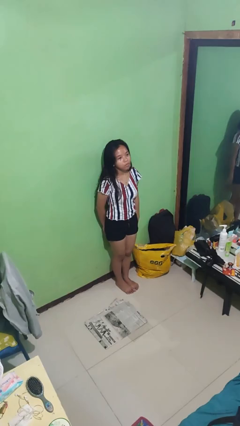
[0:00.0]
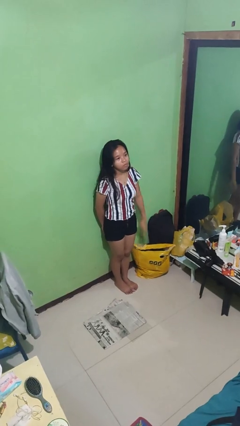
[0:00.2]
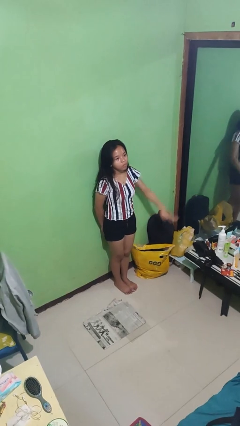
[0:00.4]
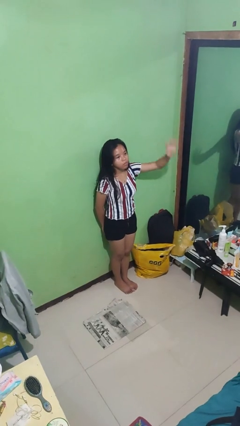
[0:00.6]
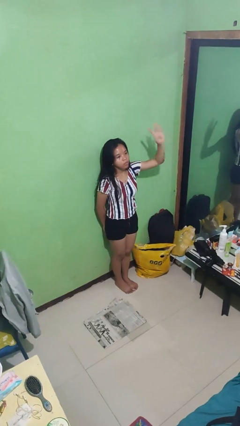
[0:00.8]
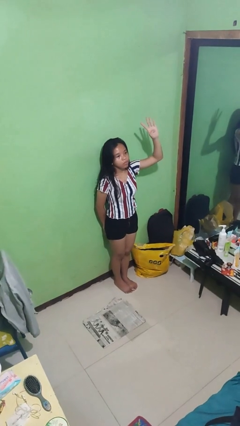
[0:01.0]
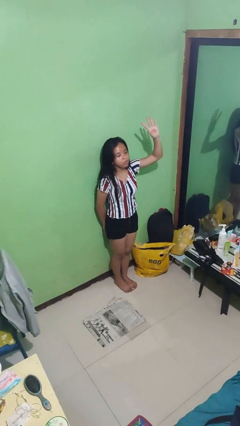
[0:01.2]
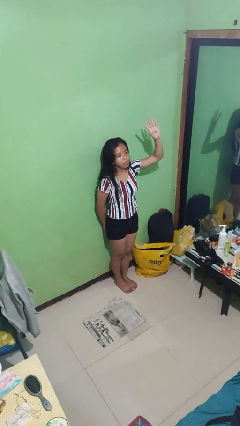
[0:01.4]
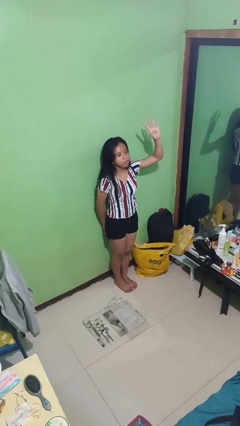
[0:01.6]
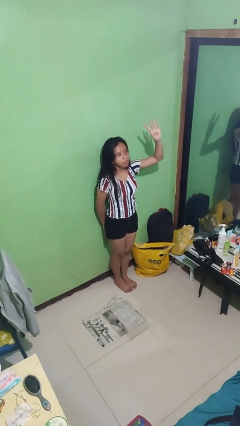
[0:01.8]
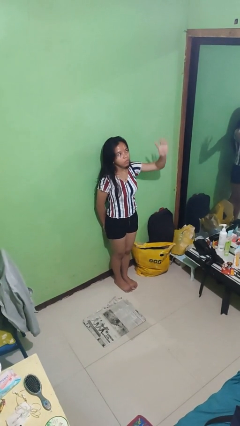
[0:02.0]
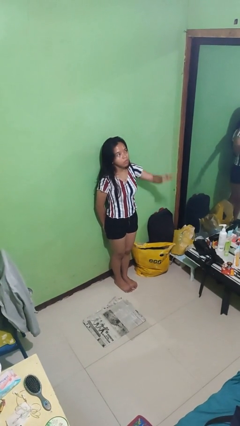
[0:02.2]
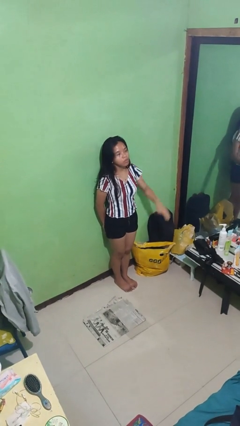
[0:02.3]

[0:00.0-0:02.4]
person gestures number four

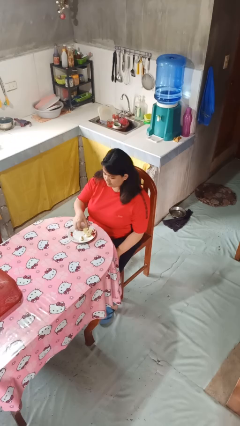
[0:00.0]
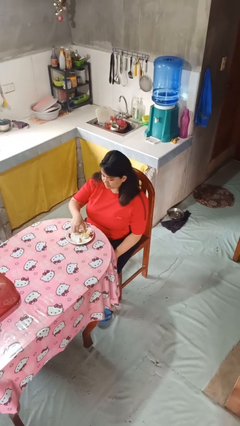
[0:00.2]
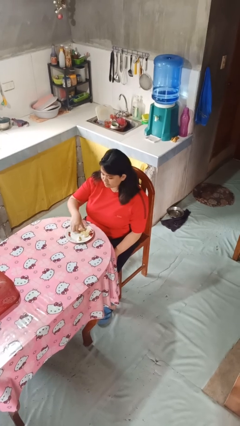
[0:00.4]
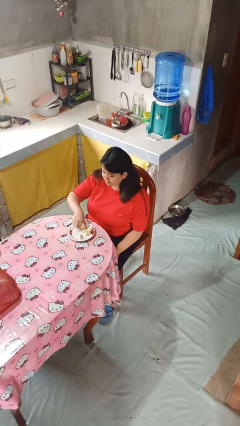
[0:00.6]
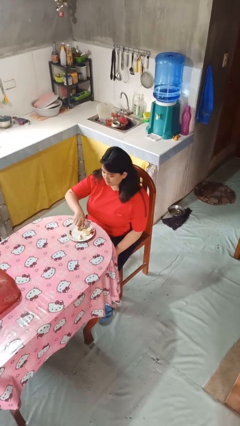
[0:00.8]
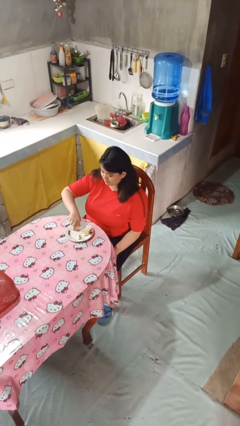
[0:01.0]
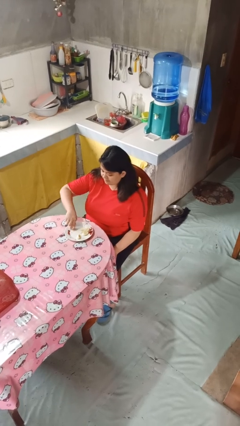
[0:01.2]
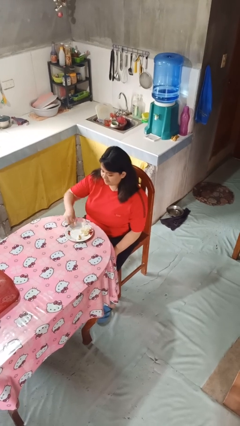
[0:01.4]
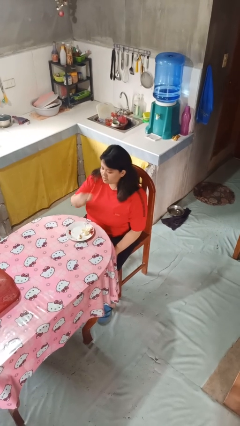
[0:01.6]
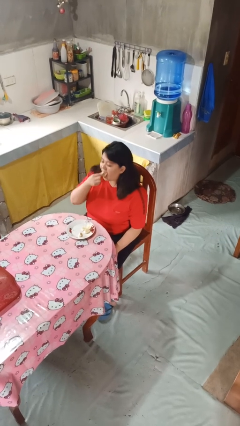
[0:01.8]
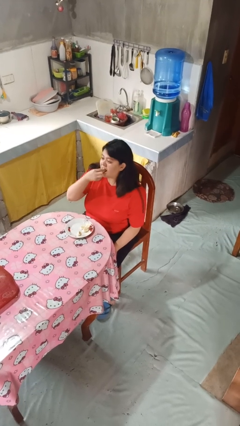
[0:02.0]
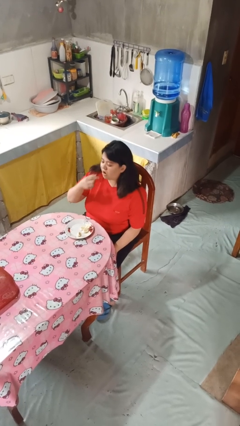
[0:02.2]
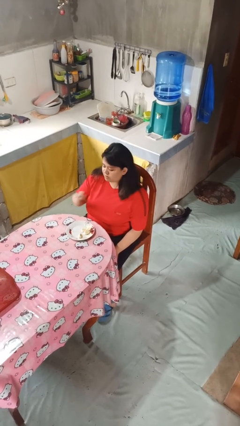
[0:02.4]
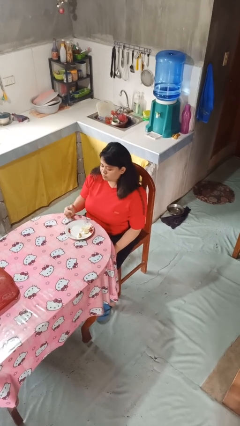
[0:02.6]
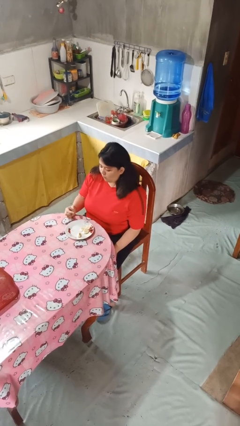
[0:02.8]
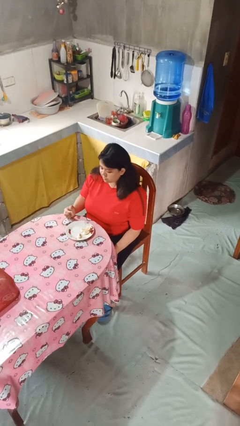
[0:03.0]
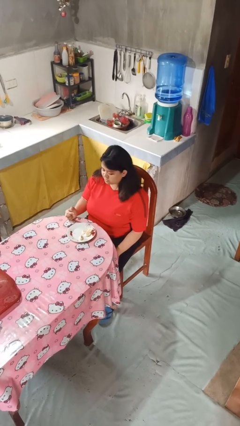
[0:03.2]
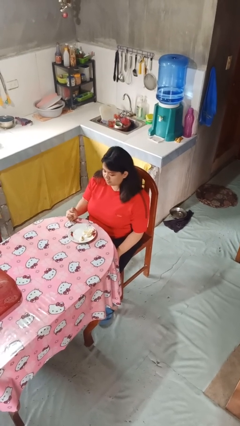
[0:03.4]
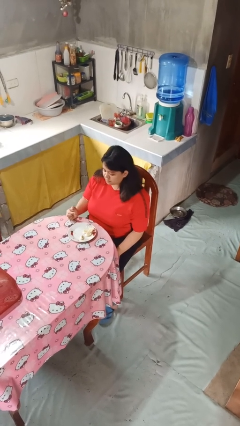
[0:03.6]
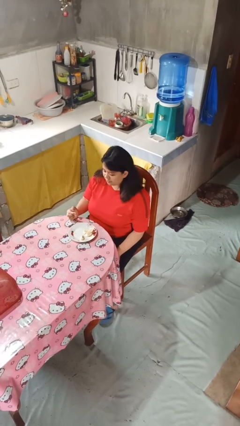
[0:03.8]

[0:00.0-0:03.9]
person eats with hands

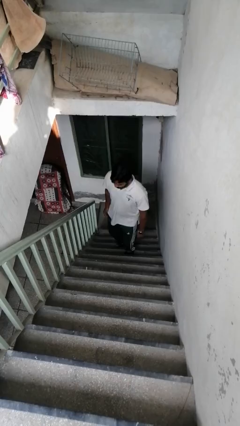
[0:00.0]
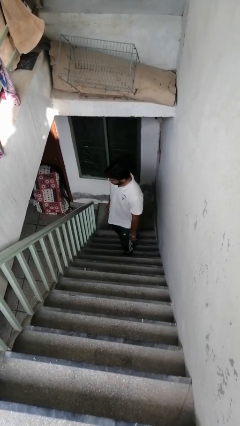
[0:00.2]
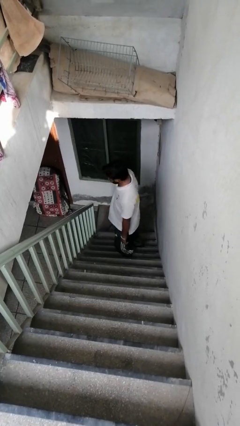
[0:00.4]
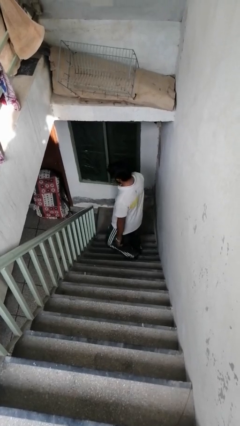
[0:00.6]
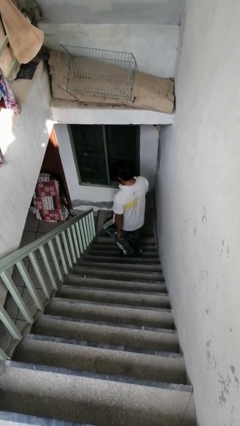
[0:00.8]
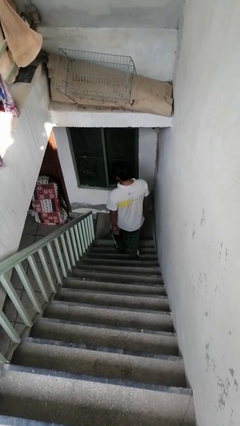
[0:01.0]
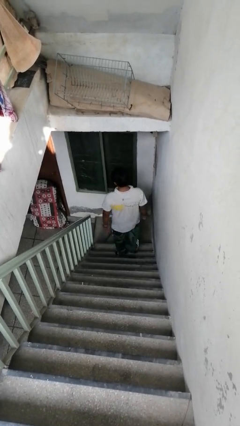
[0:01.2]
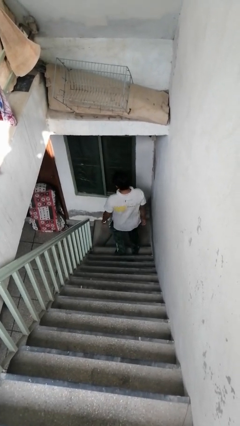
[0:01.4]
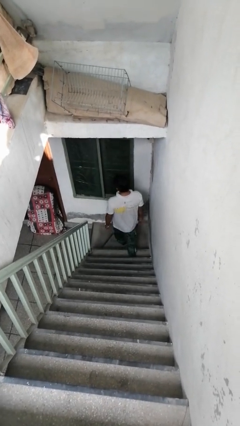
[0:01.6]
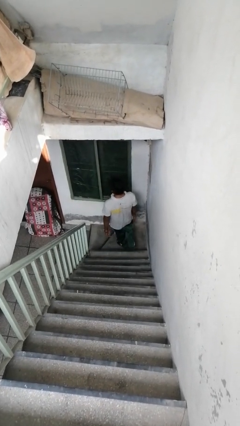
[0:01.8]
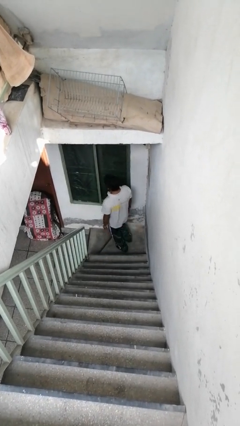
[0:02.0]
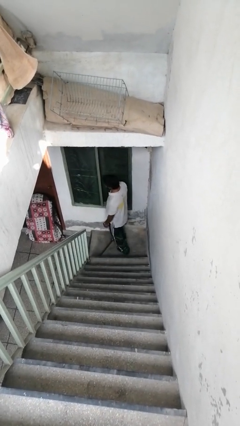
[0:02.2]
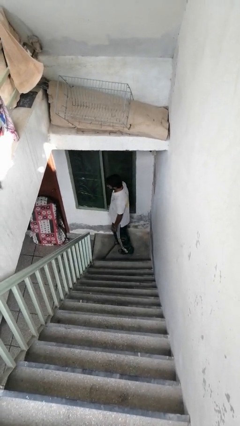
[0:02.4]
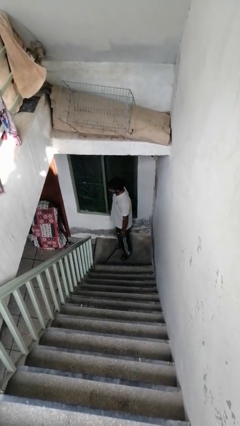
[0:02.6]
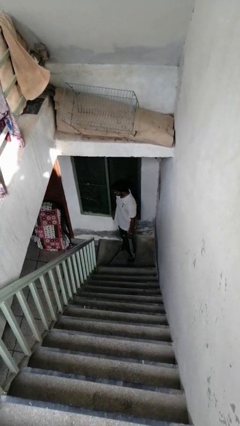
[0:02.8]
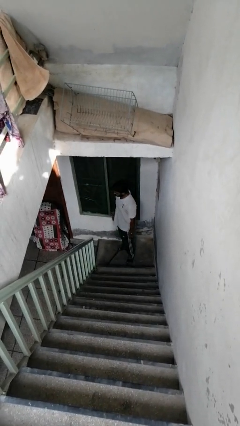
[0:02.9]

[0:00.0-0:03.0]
person climbs down stairs

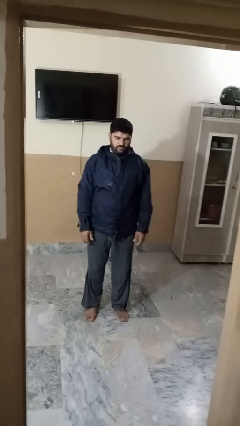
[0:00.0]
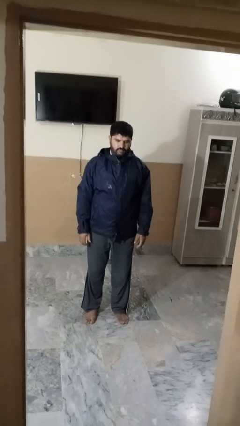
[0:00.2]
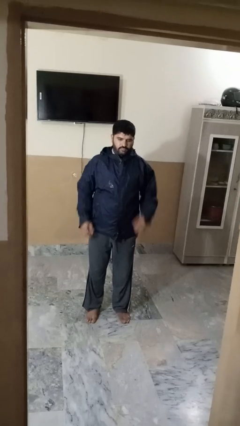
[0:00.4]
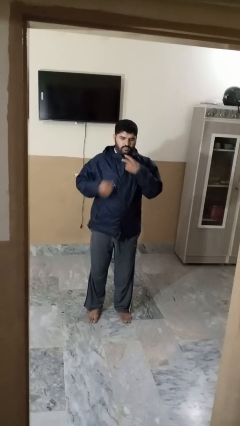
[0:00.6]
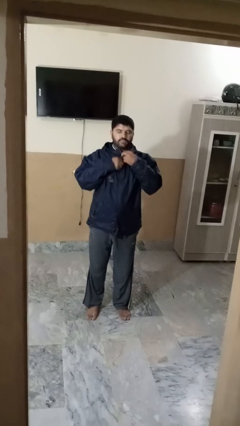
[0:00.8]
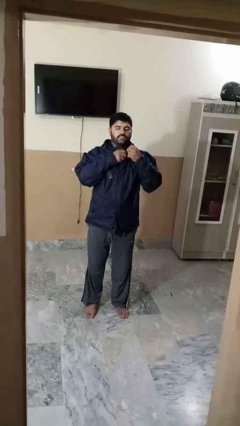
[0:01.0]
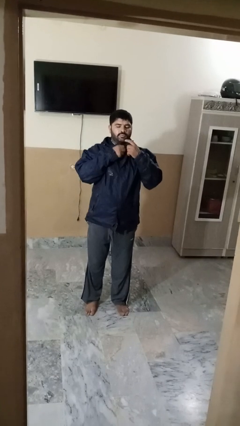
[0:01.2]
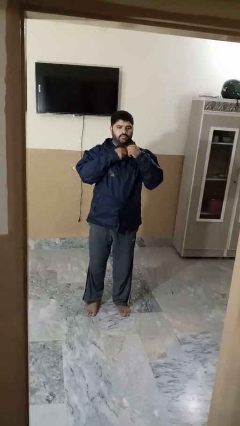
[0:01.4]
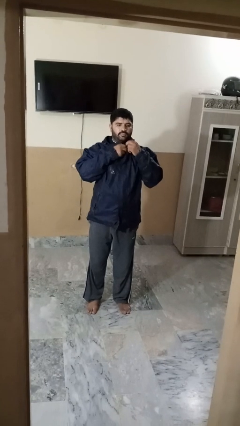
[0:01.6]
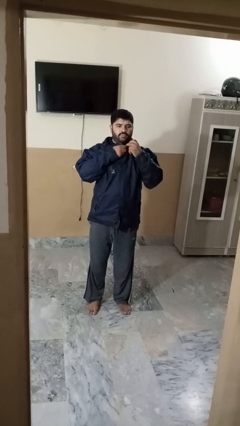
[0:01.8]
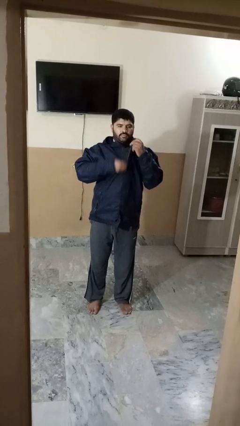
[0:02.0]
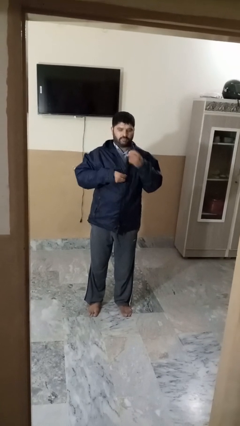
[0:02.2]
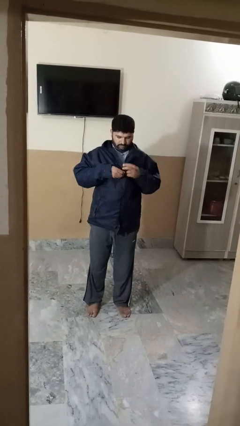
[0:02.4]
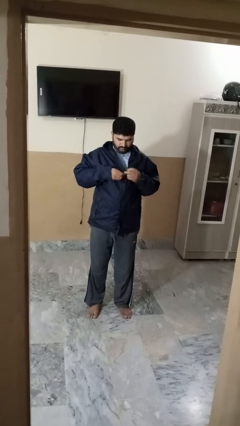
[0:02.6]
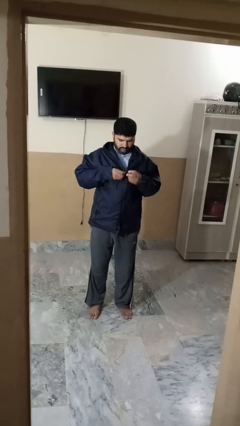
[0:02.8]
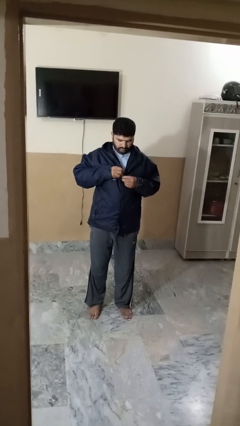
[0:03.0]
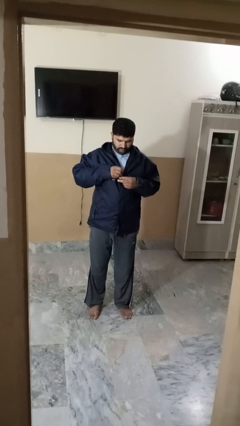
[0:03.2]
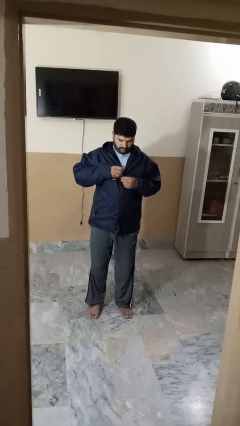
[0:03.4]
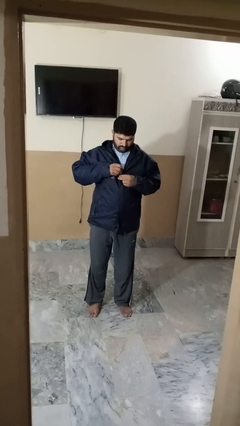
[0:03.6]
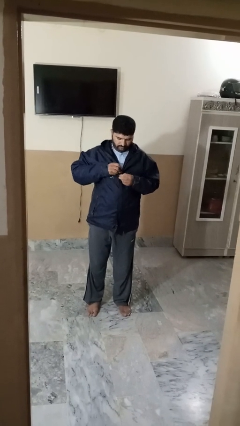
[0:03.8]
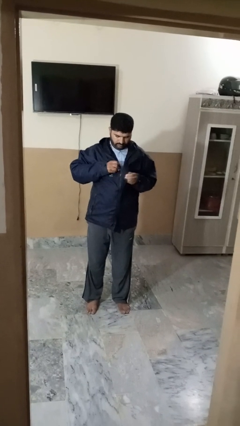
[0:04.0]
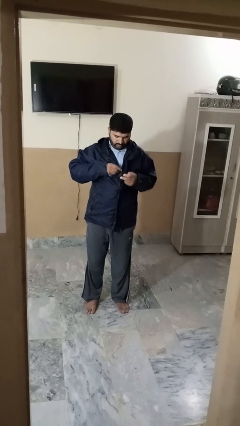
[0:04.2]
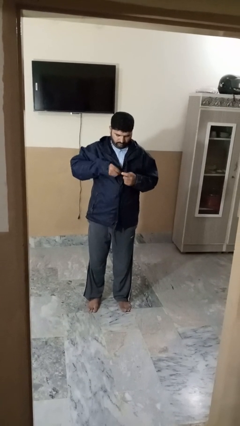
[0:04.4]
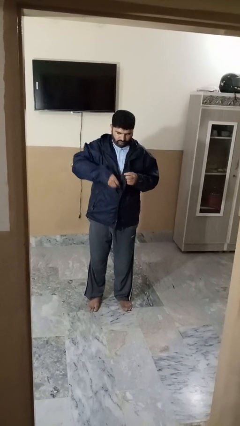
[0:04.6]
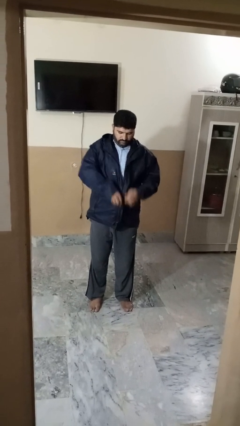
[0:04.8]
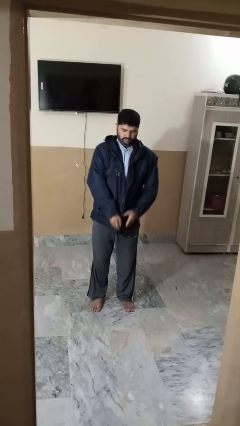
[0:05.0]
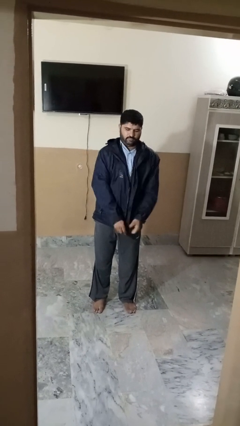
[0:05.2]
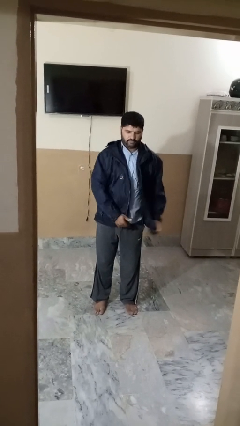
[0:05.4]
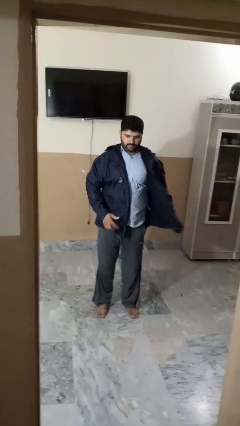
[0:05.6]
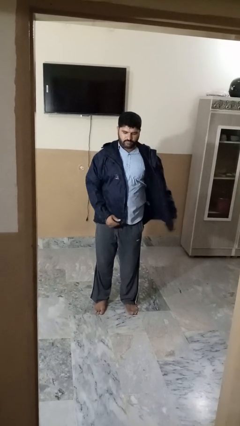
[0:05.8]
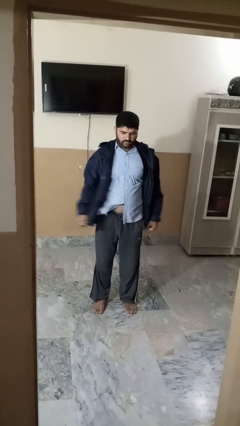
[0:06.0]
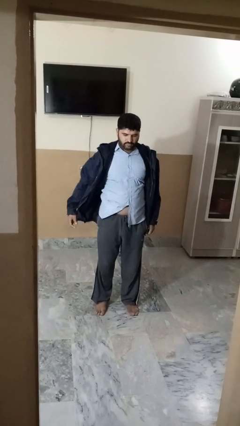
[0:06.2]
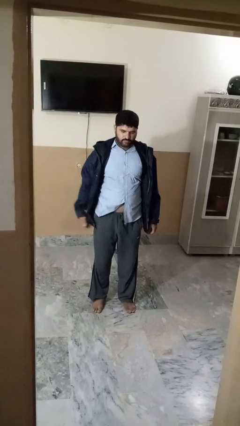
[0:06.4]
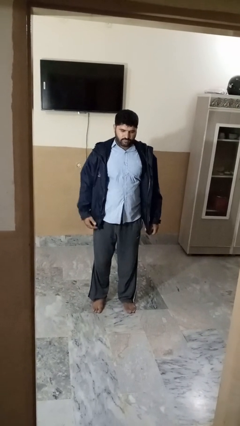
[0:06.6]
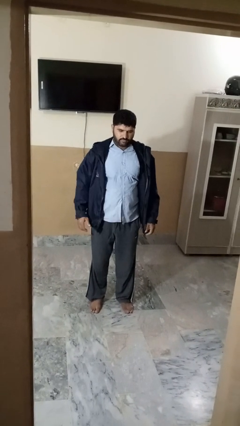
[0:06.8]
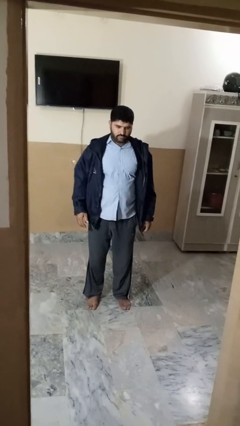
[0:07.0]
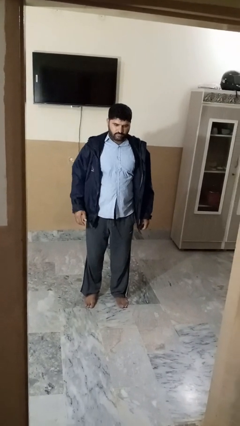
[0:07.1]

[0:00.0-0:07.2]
person unzips jacket

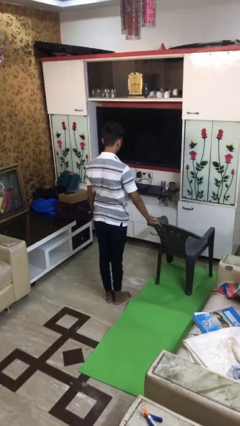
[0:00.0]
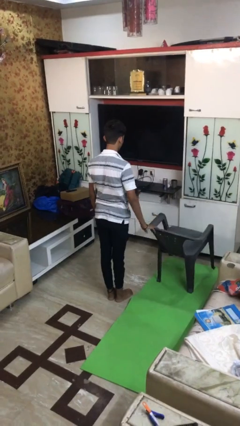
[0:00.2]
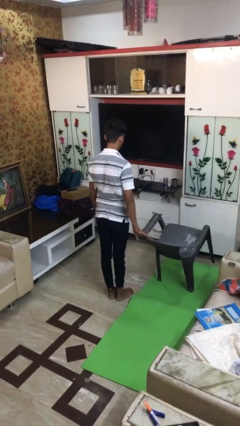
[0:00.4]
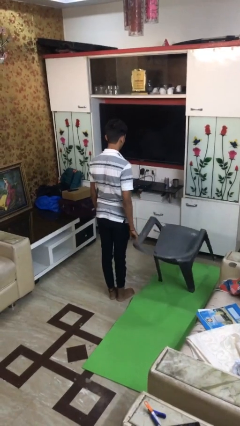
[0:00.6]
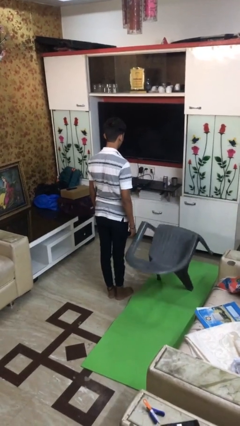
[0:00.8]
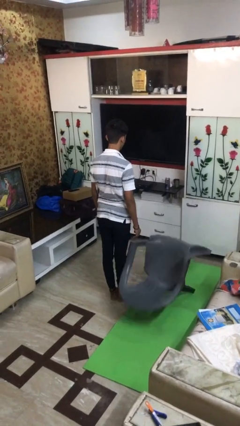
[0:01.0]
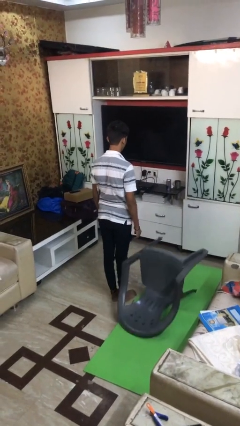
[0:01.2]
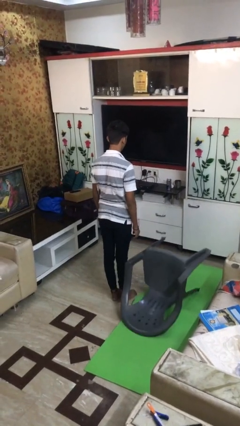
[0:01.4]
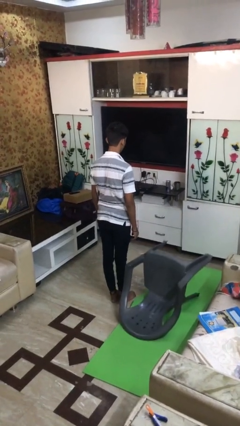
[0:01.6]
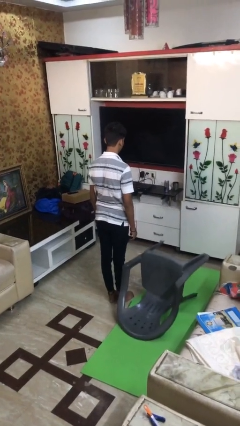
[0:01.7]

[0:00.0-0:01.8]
person knocks over furniture
